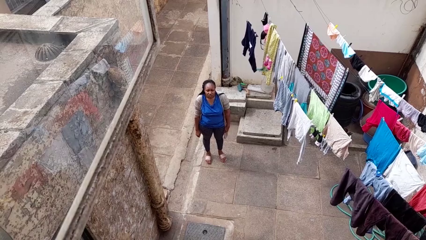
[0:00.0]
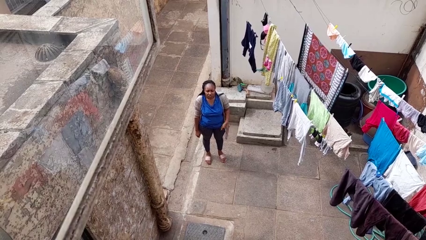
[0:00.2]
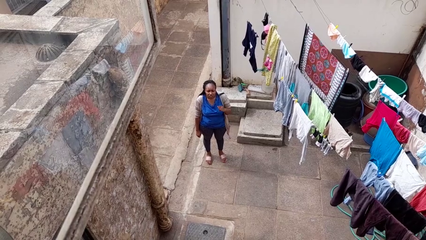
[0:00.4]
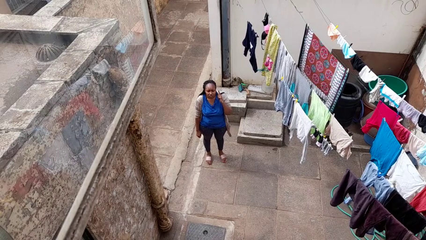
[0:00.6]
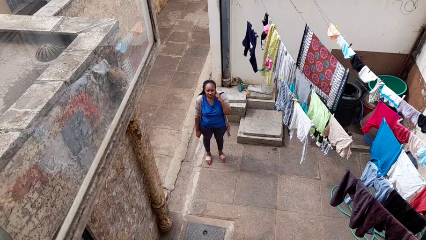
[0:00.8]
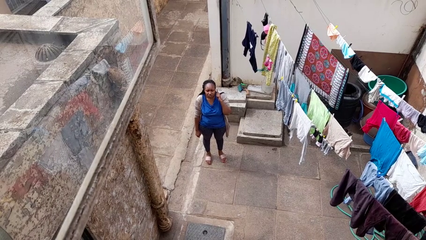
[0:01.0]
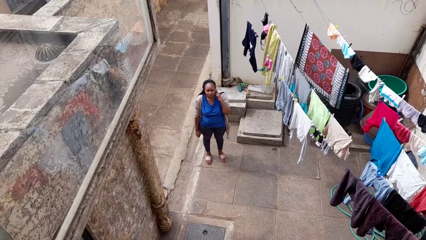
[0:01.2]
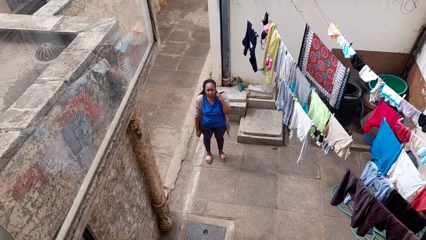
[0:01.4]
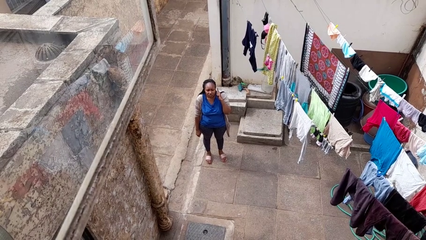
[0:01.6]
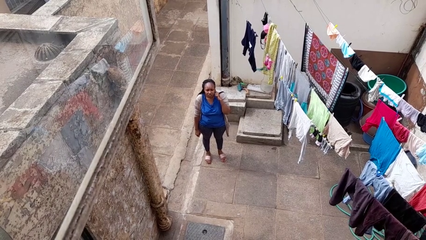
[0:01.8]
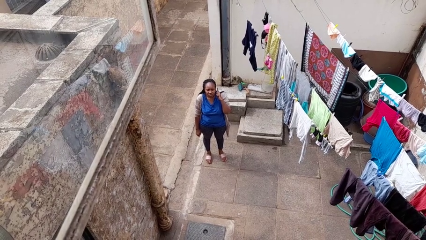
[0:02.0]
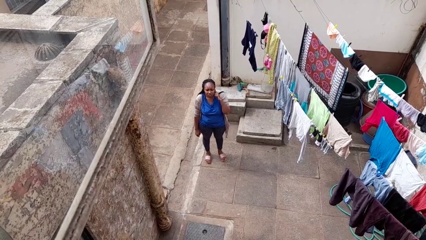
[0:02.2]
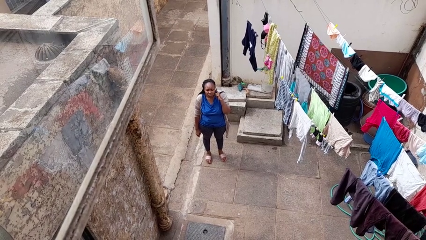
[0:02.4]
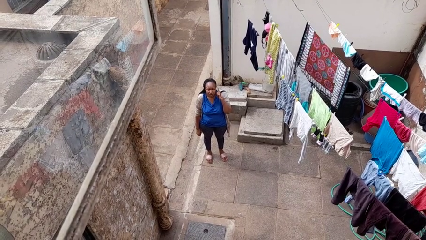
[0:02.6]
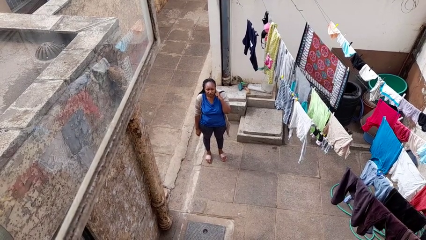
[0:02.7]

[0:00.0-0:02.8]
person gestures listen closely

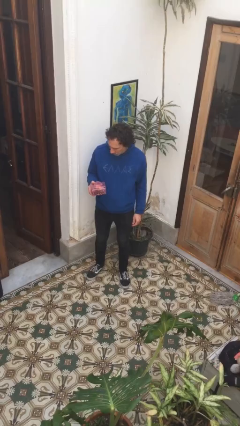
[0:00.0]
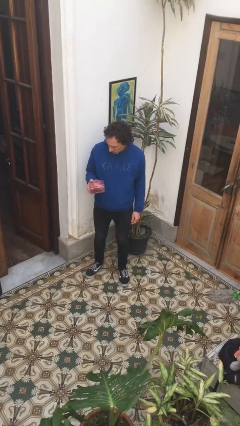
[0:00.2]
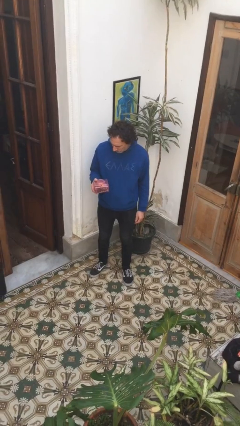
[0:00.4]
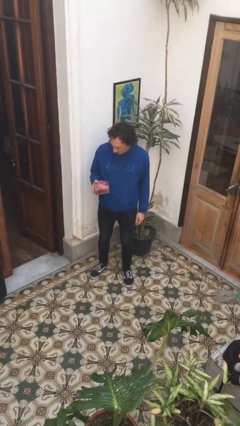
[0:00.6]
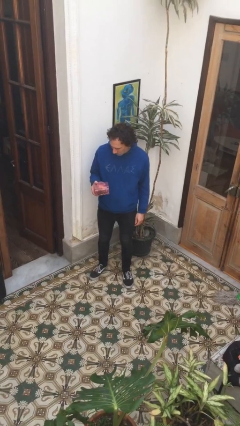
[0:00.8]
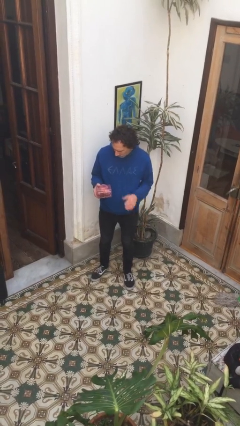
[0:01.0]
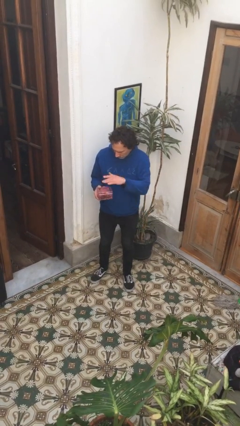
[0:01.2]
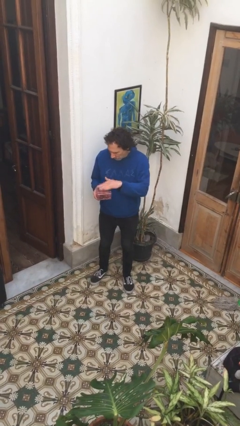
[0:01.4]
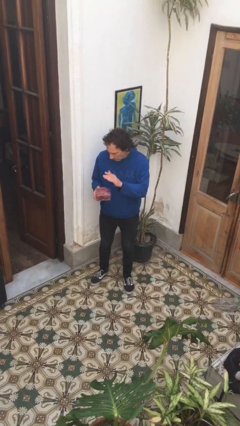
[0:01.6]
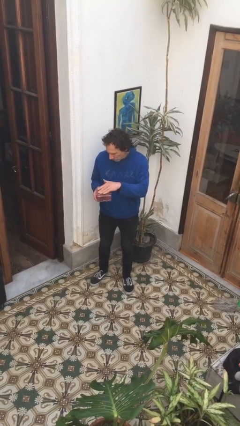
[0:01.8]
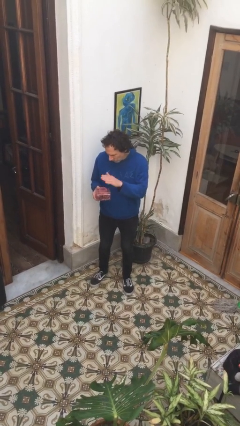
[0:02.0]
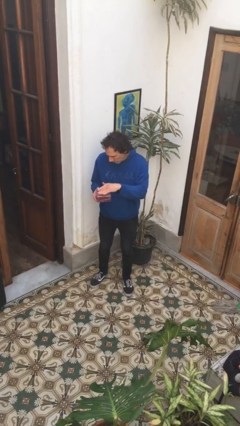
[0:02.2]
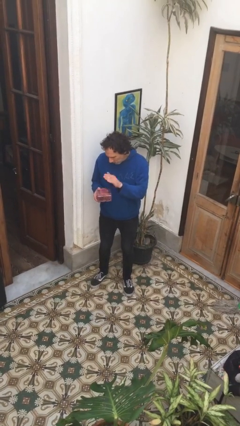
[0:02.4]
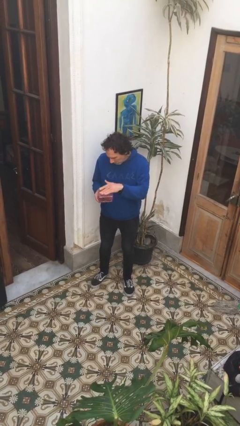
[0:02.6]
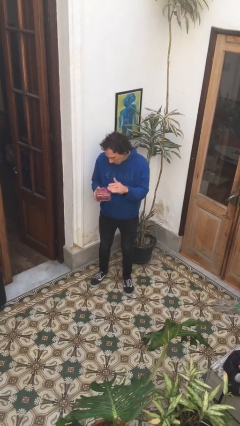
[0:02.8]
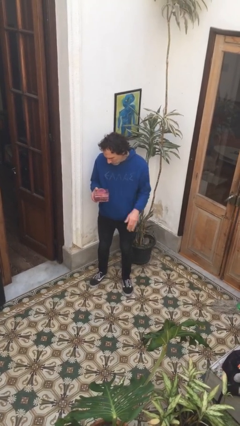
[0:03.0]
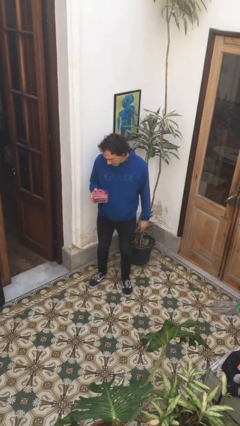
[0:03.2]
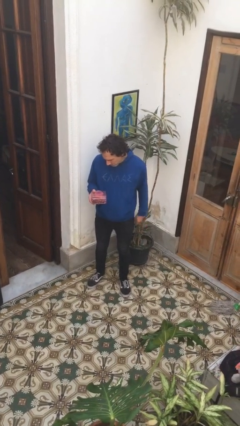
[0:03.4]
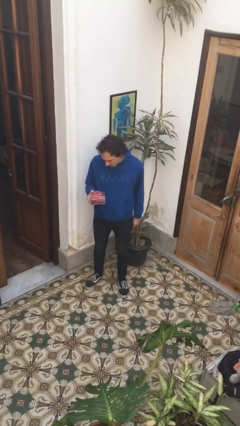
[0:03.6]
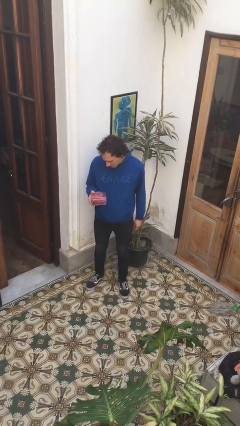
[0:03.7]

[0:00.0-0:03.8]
person taps object with finger

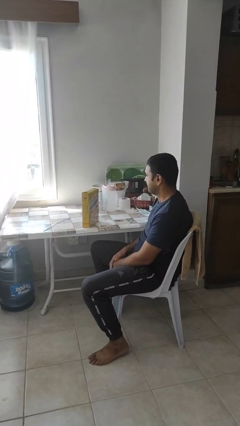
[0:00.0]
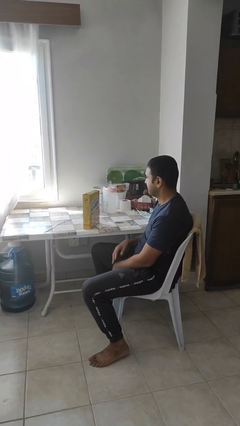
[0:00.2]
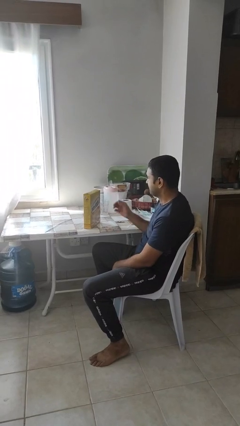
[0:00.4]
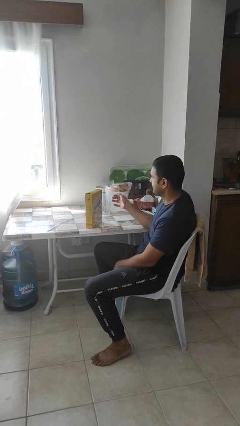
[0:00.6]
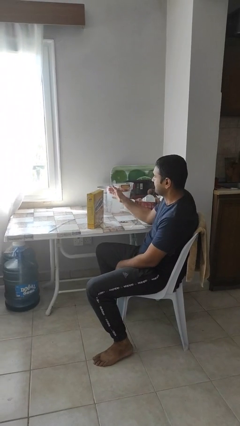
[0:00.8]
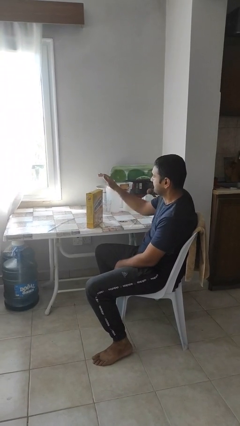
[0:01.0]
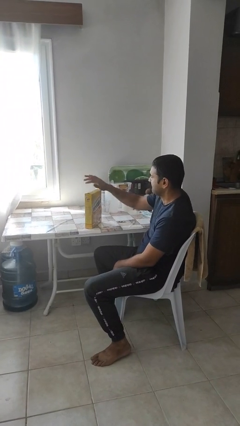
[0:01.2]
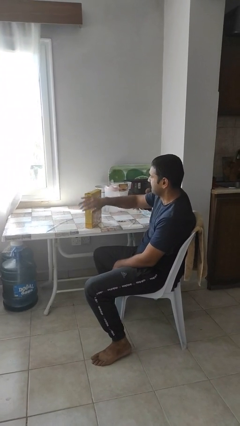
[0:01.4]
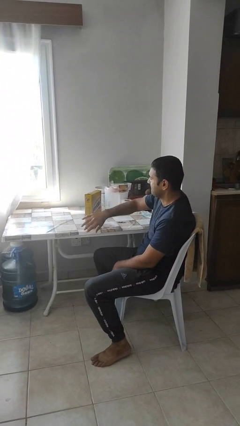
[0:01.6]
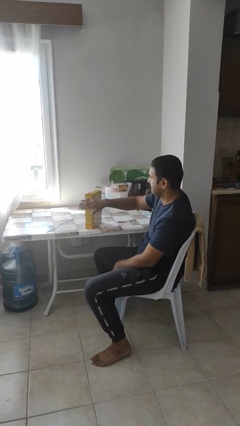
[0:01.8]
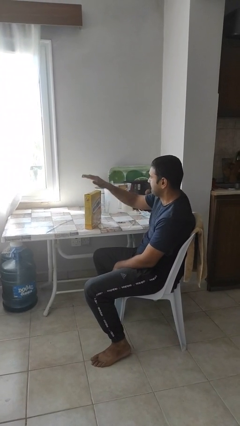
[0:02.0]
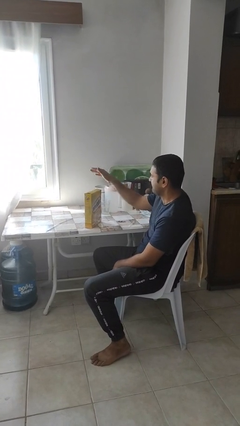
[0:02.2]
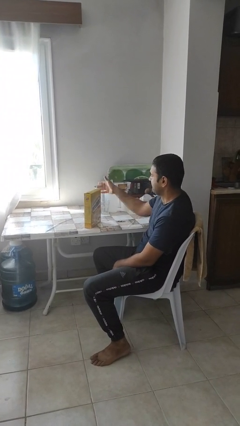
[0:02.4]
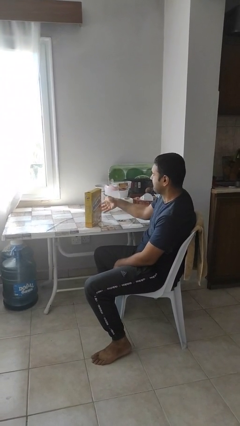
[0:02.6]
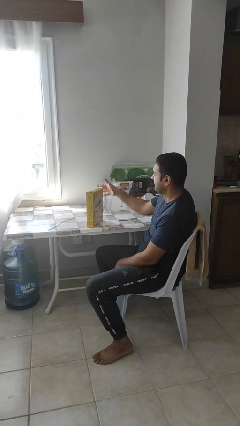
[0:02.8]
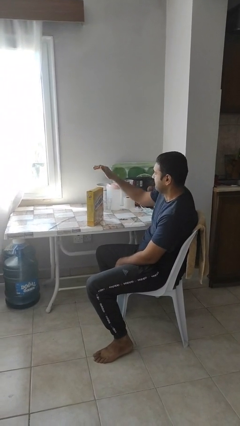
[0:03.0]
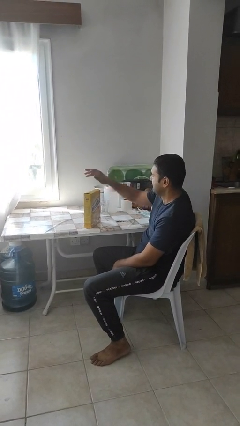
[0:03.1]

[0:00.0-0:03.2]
person waves hand over object

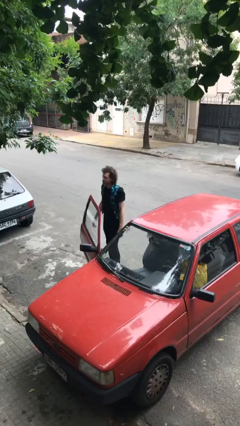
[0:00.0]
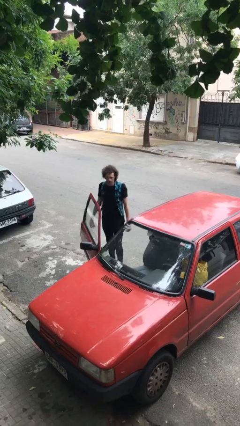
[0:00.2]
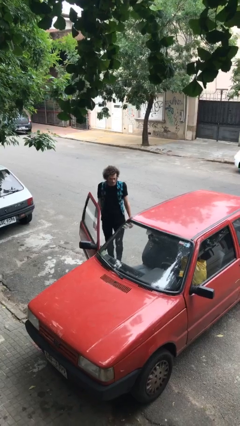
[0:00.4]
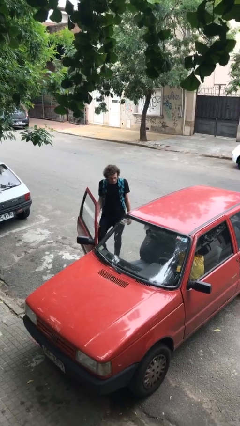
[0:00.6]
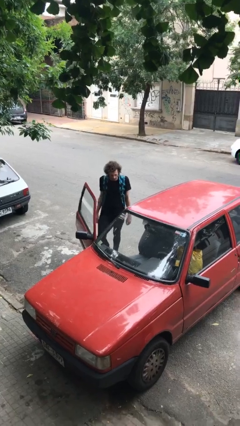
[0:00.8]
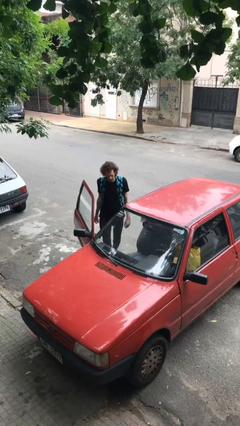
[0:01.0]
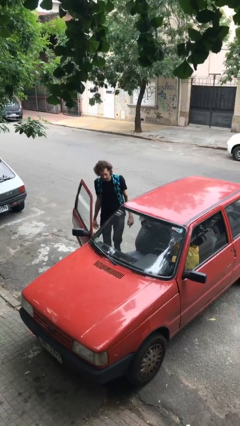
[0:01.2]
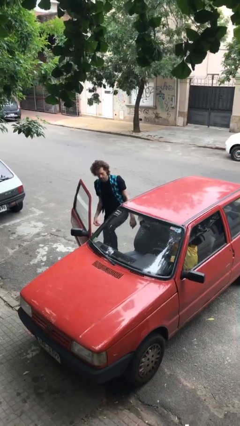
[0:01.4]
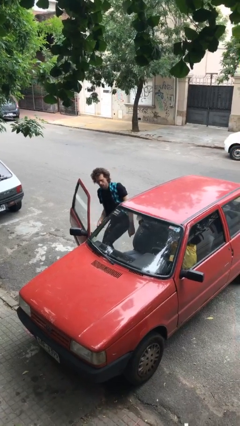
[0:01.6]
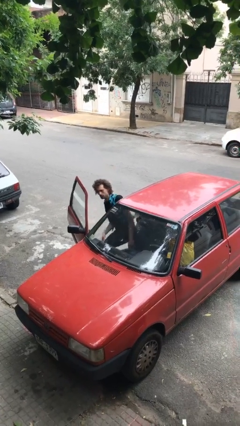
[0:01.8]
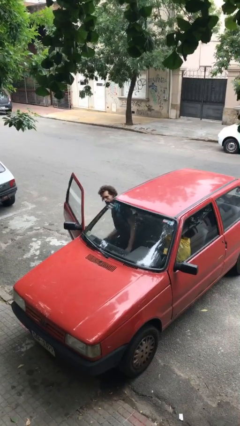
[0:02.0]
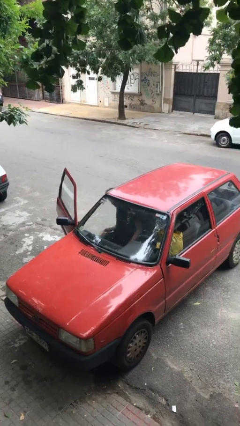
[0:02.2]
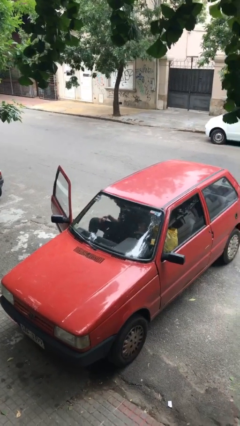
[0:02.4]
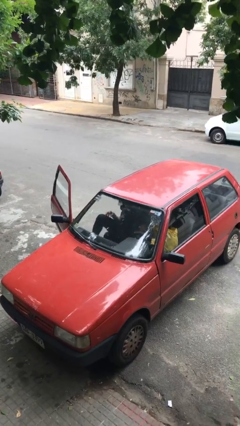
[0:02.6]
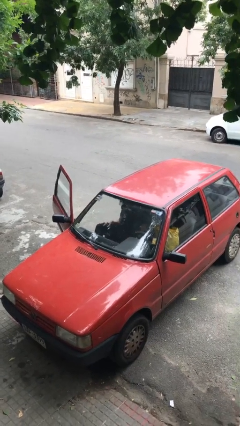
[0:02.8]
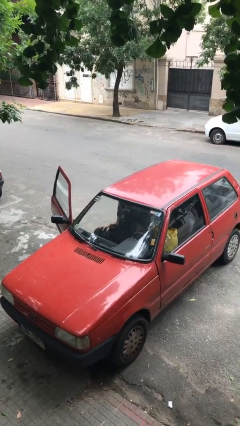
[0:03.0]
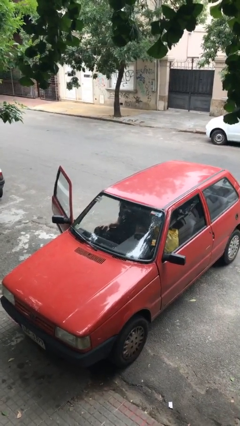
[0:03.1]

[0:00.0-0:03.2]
person enters car

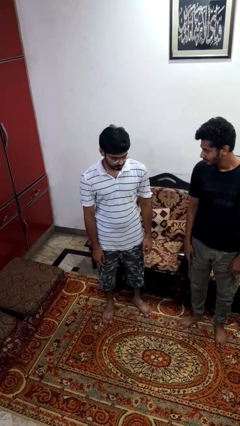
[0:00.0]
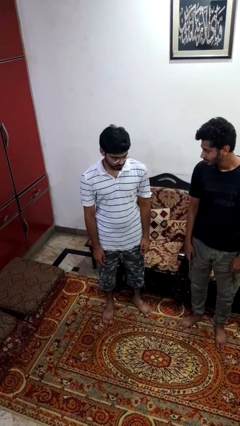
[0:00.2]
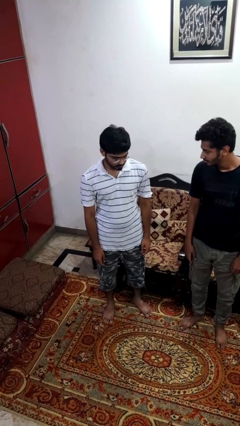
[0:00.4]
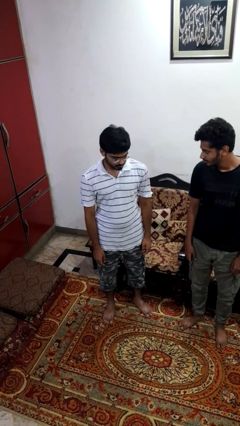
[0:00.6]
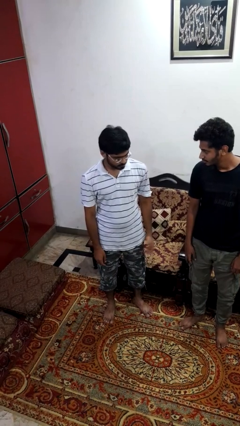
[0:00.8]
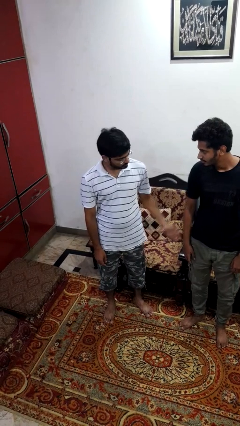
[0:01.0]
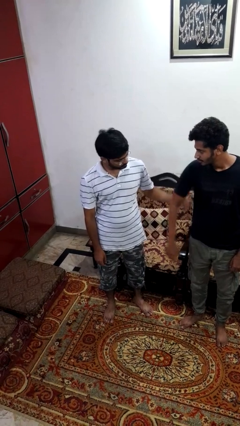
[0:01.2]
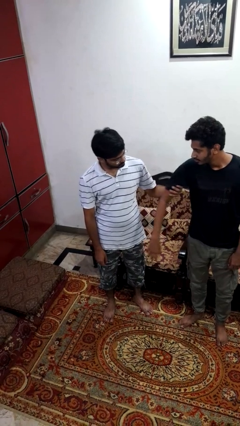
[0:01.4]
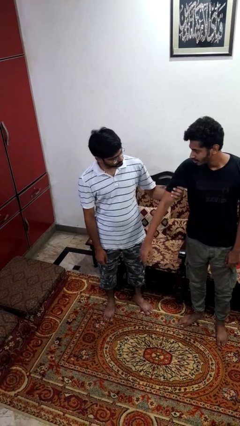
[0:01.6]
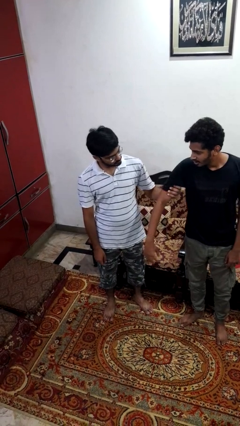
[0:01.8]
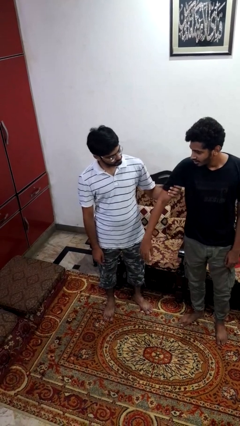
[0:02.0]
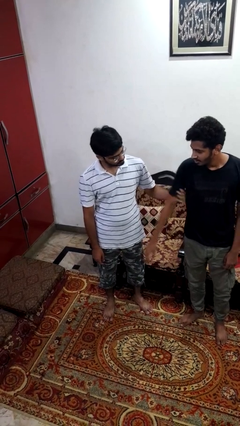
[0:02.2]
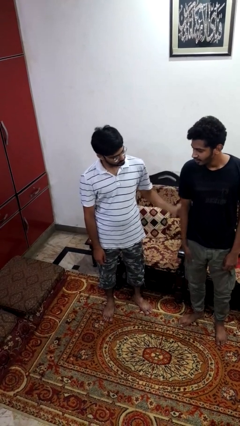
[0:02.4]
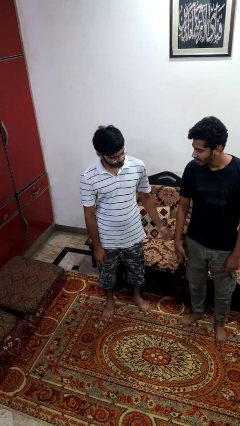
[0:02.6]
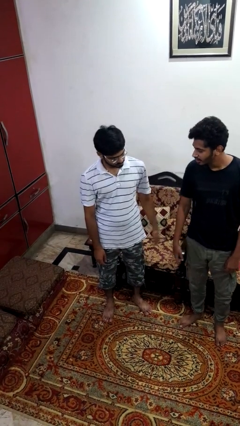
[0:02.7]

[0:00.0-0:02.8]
person grabs person by bicep

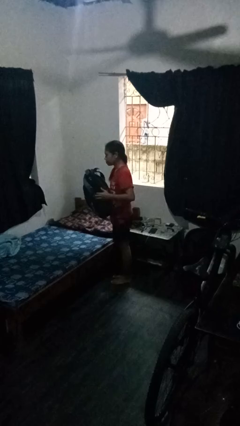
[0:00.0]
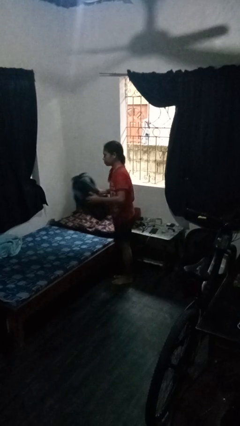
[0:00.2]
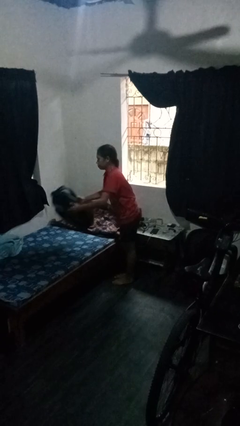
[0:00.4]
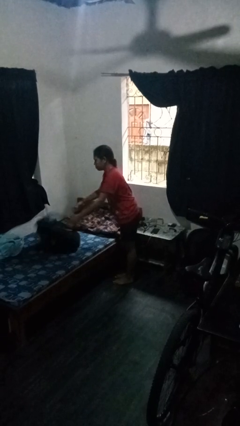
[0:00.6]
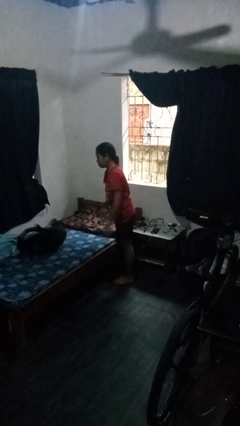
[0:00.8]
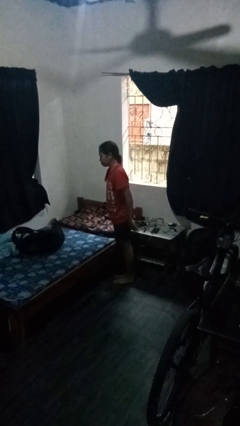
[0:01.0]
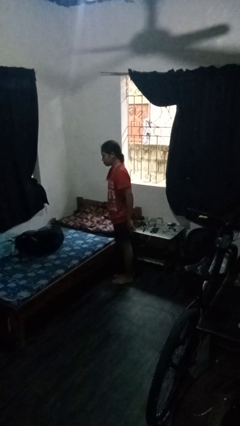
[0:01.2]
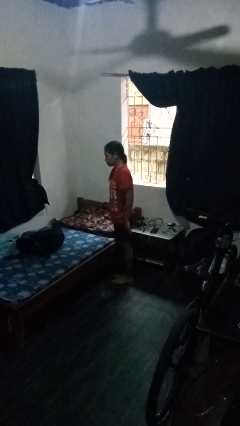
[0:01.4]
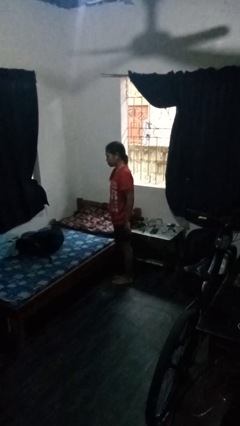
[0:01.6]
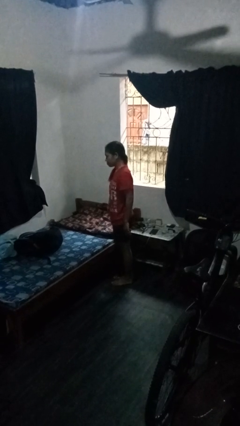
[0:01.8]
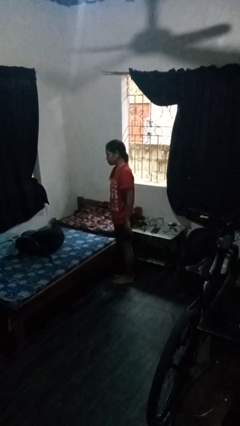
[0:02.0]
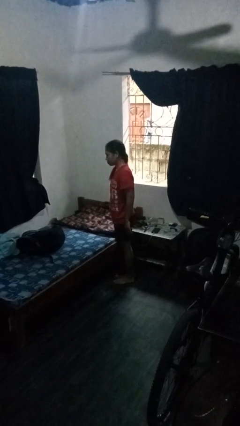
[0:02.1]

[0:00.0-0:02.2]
person throws object on bed
